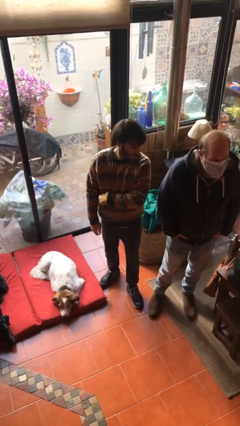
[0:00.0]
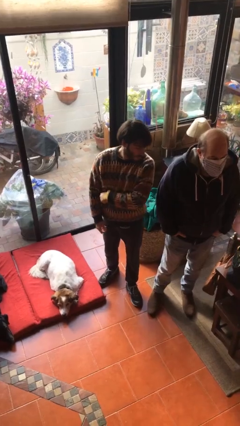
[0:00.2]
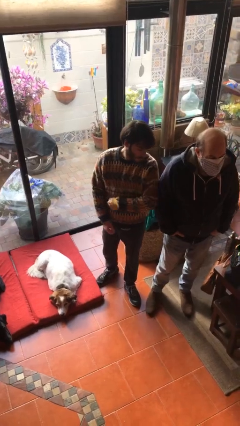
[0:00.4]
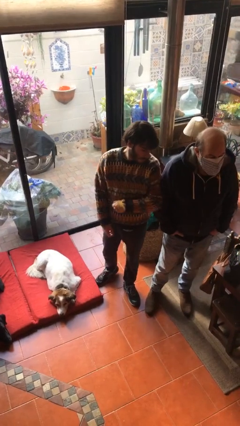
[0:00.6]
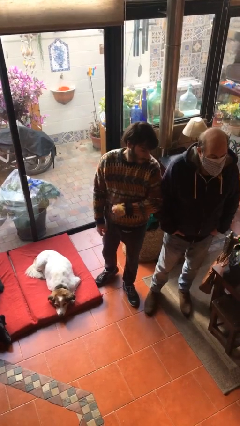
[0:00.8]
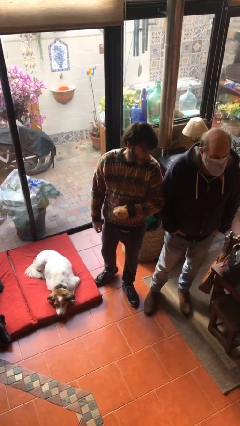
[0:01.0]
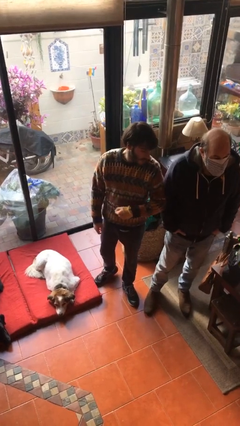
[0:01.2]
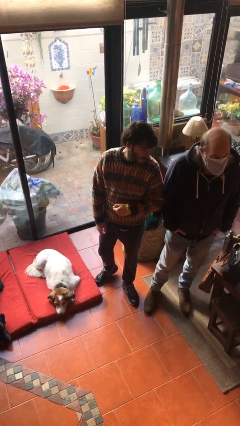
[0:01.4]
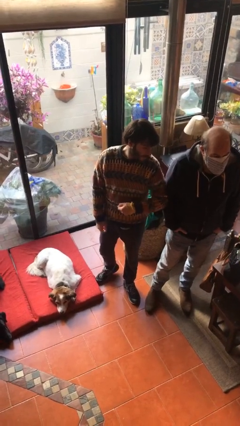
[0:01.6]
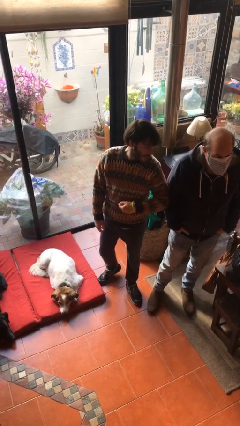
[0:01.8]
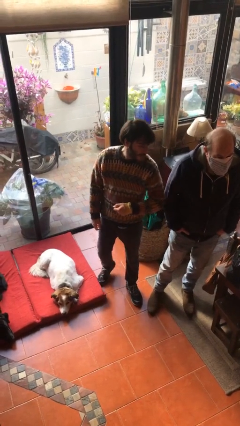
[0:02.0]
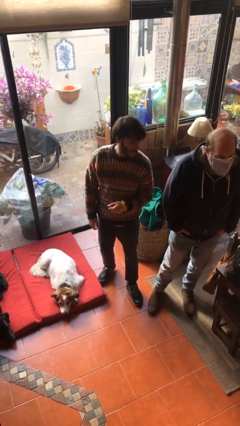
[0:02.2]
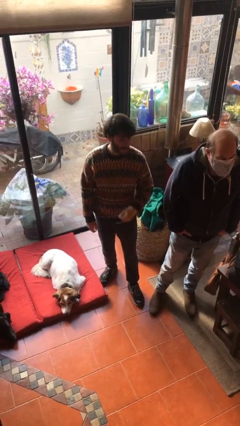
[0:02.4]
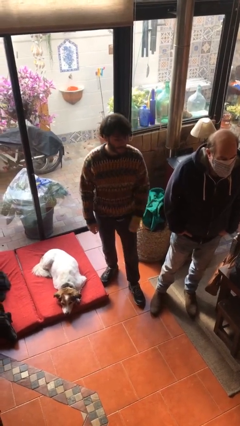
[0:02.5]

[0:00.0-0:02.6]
person nudges person with elbow

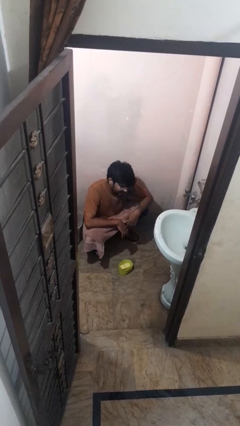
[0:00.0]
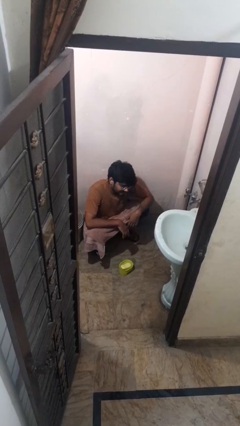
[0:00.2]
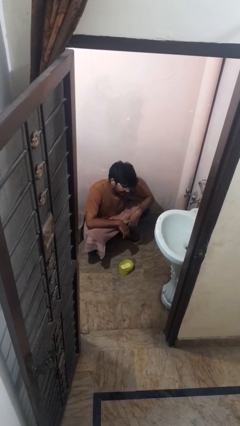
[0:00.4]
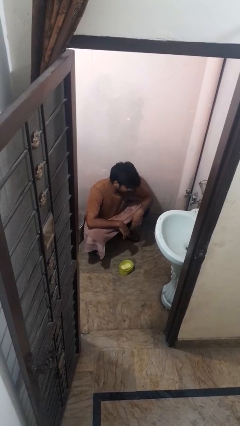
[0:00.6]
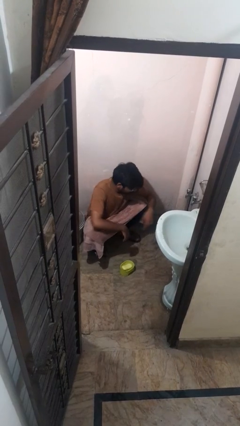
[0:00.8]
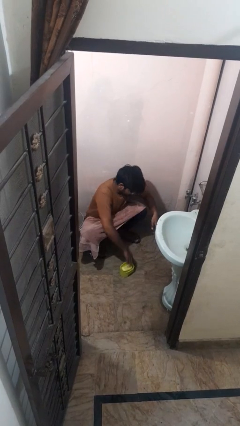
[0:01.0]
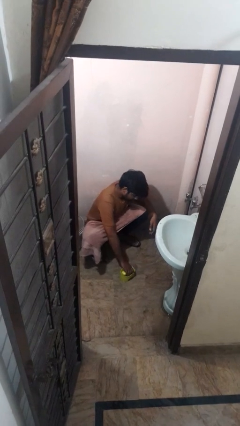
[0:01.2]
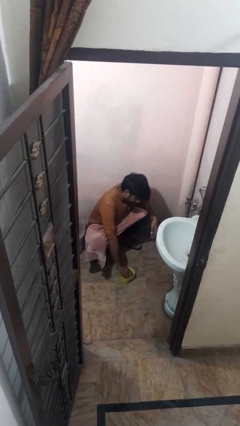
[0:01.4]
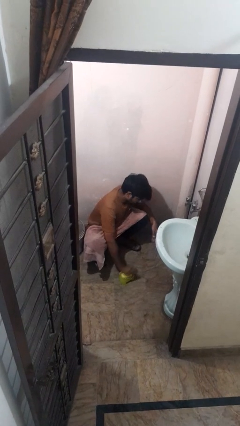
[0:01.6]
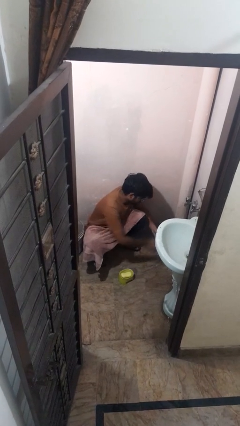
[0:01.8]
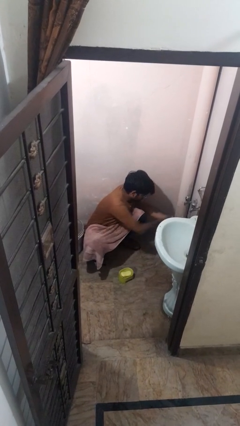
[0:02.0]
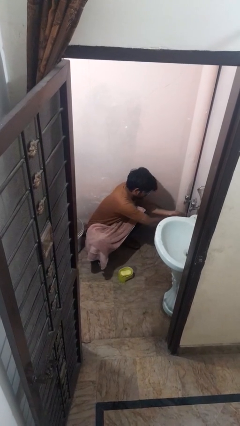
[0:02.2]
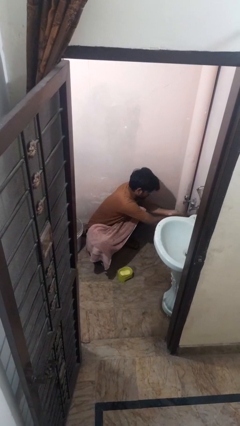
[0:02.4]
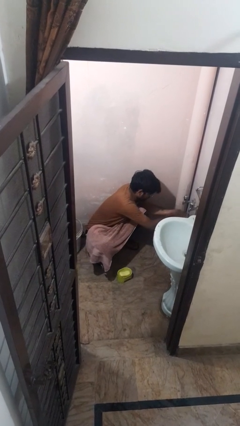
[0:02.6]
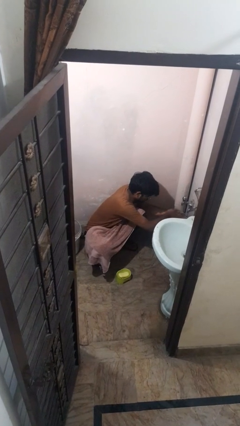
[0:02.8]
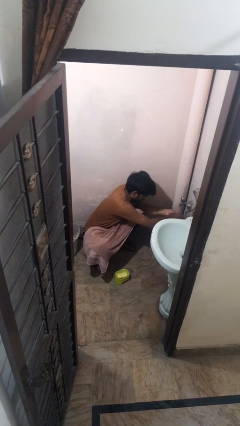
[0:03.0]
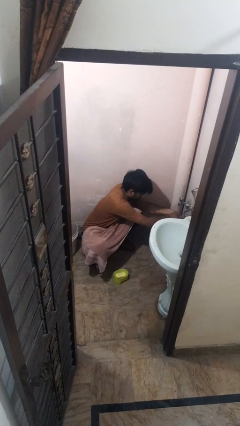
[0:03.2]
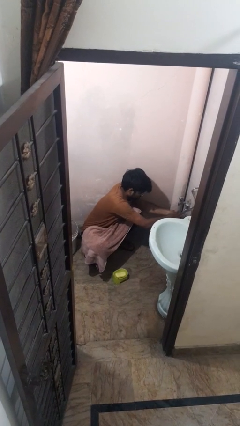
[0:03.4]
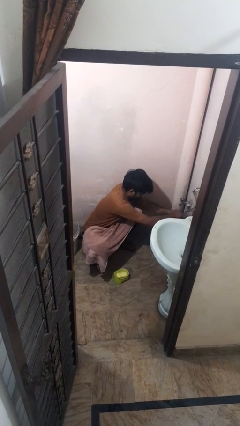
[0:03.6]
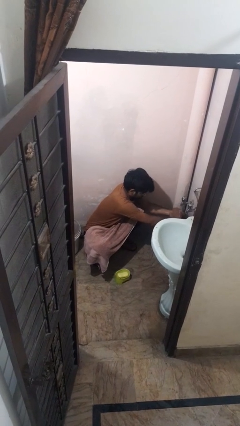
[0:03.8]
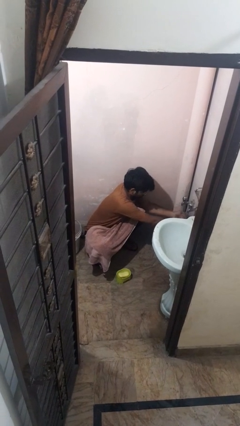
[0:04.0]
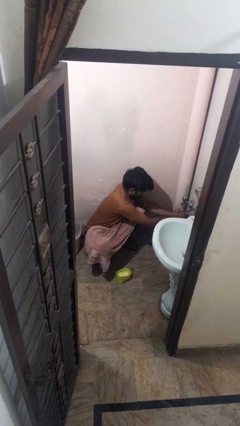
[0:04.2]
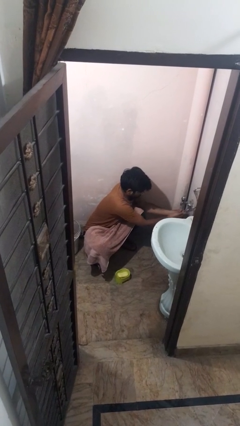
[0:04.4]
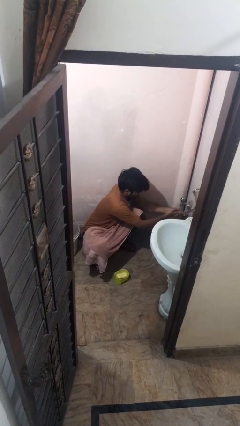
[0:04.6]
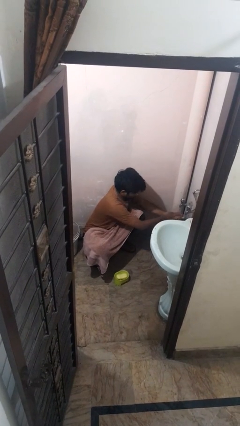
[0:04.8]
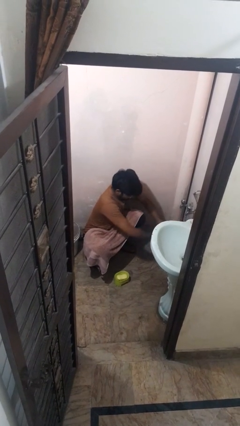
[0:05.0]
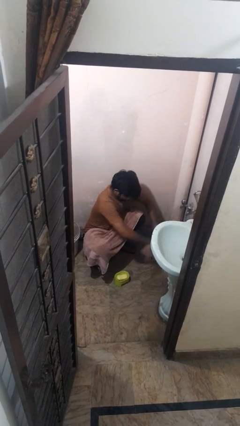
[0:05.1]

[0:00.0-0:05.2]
person washes hands

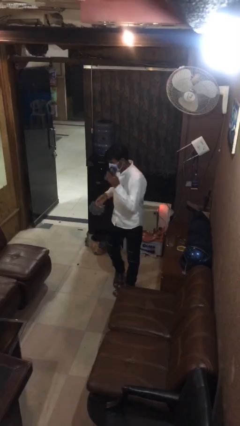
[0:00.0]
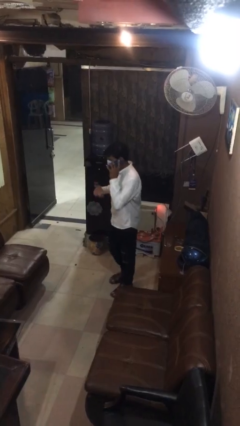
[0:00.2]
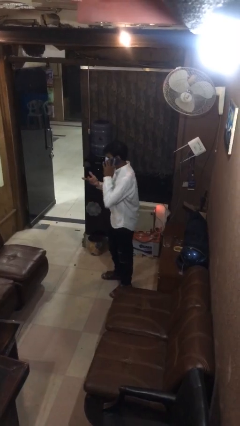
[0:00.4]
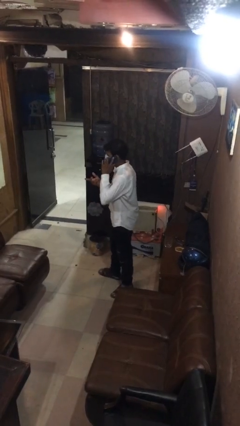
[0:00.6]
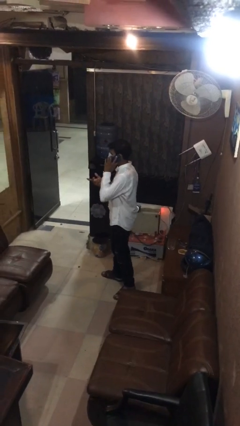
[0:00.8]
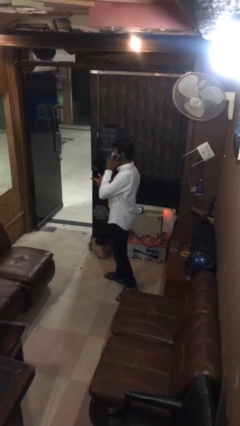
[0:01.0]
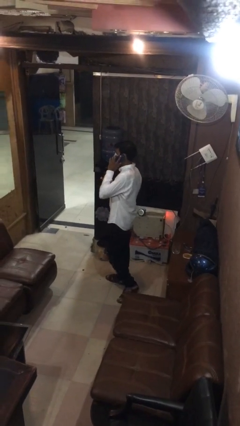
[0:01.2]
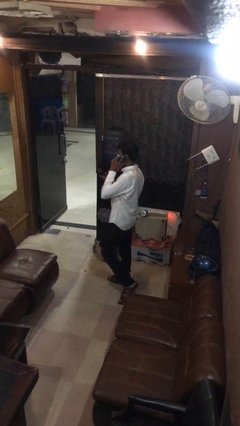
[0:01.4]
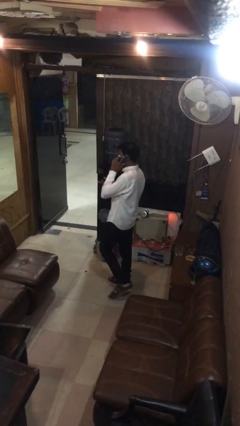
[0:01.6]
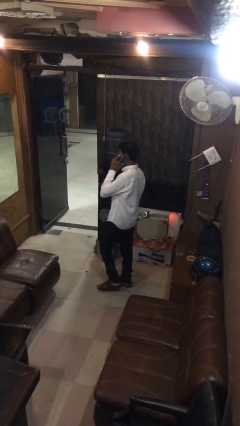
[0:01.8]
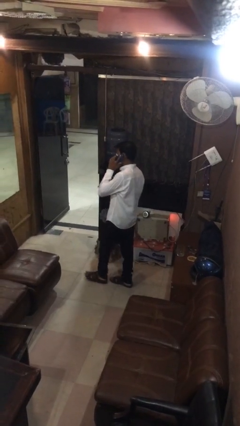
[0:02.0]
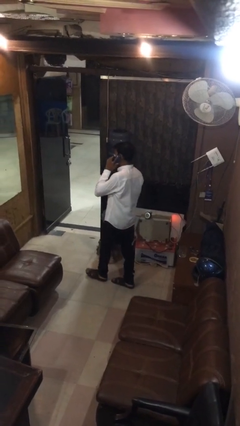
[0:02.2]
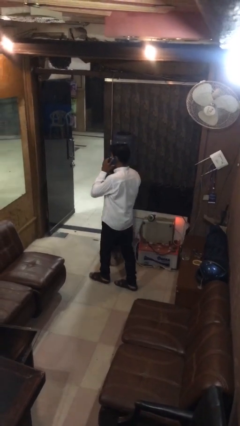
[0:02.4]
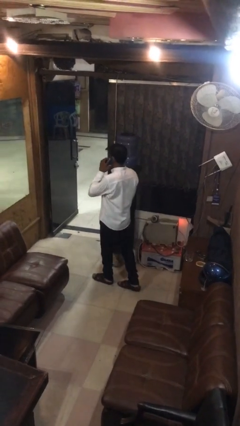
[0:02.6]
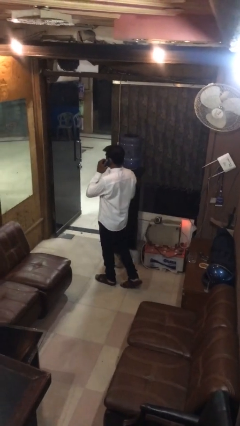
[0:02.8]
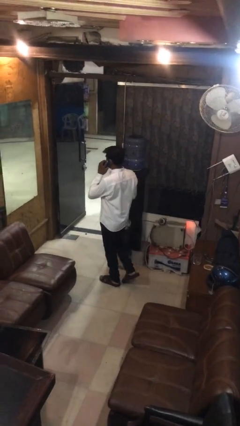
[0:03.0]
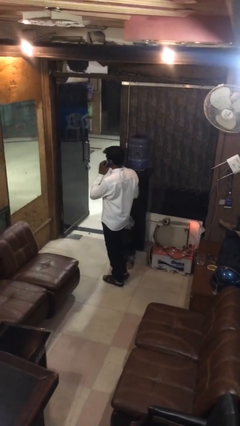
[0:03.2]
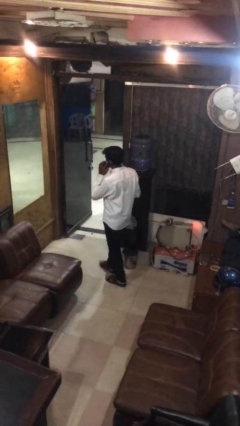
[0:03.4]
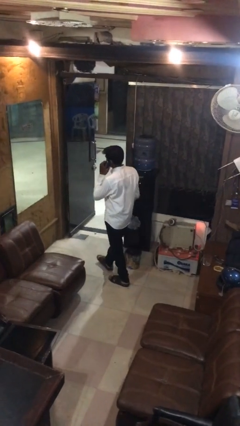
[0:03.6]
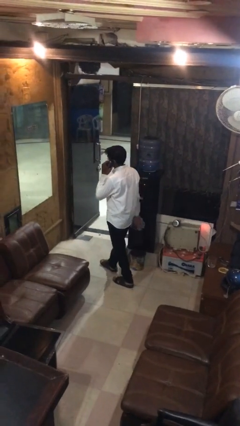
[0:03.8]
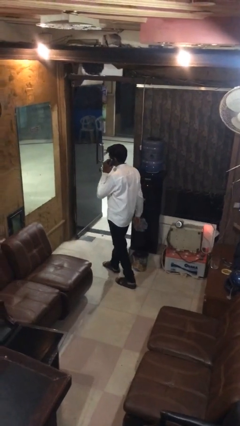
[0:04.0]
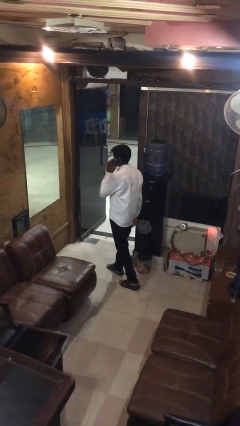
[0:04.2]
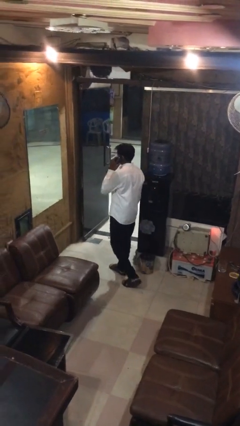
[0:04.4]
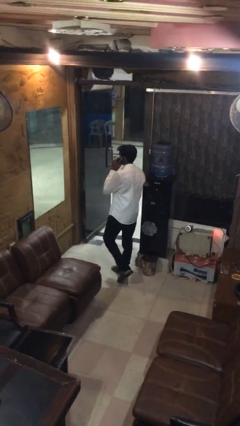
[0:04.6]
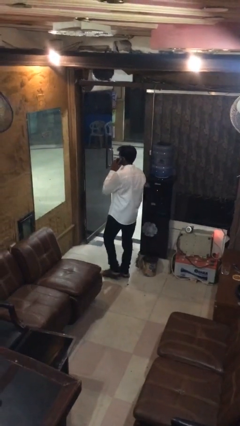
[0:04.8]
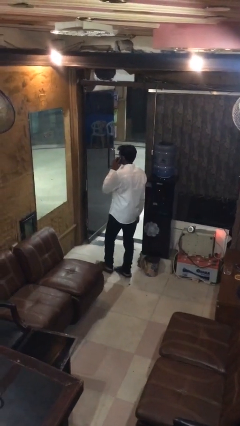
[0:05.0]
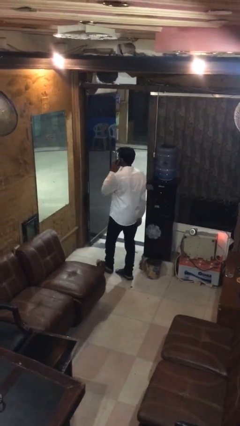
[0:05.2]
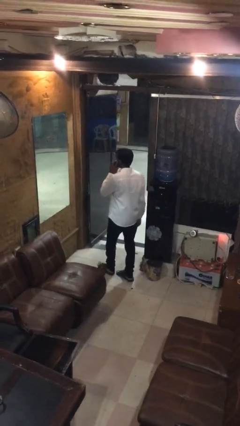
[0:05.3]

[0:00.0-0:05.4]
person talks on phone

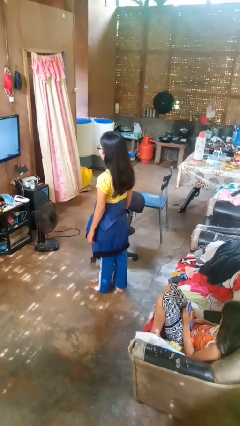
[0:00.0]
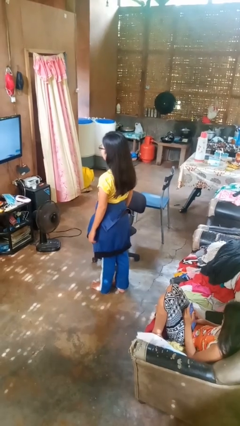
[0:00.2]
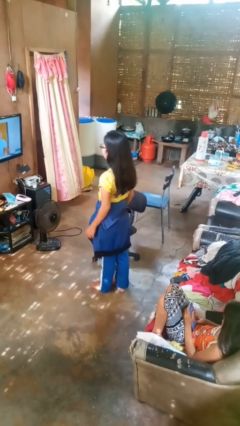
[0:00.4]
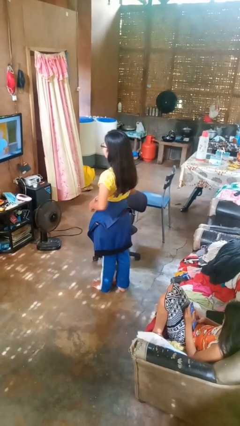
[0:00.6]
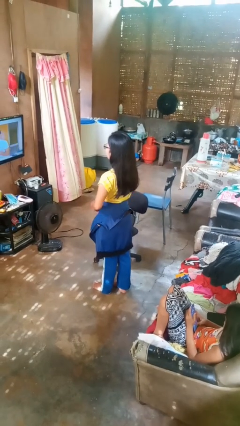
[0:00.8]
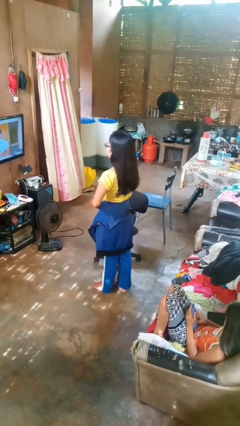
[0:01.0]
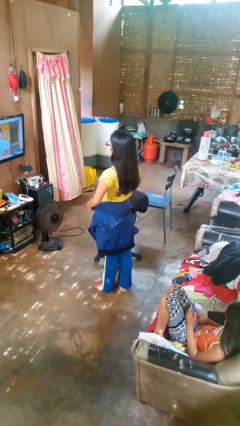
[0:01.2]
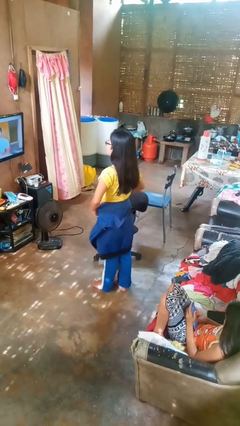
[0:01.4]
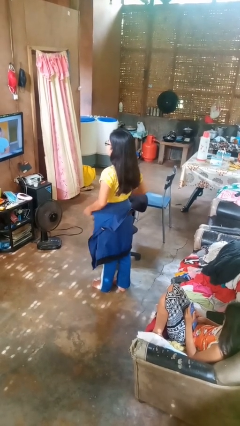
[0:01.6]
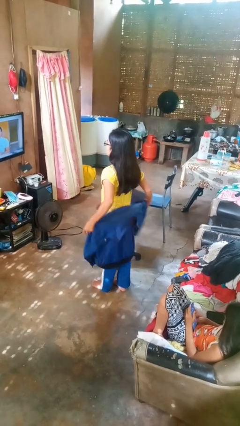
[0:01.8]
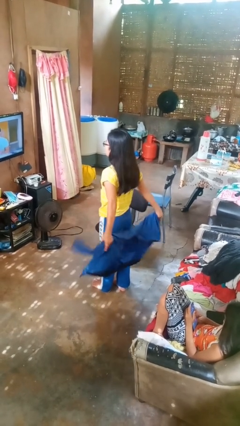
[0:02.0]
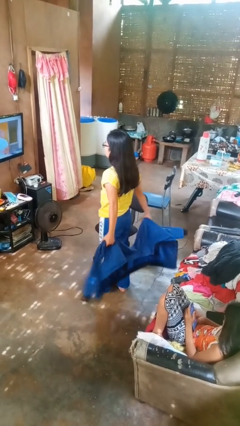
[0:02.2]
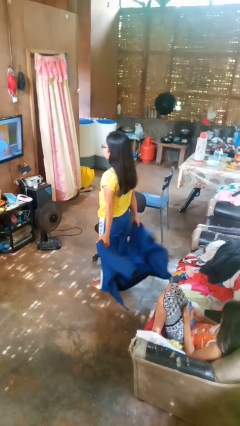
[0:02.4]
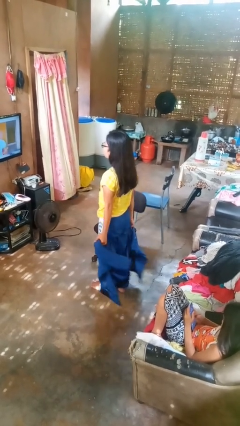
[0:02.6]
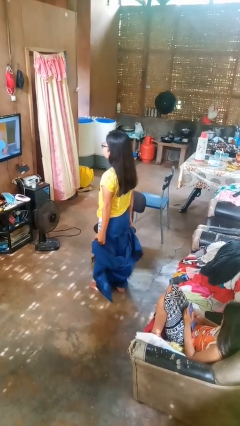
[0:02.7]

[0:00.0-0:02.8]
person unties jacket around waist

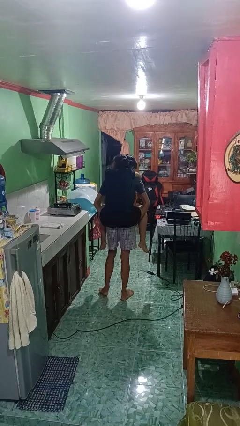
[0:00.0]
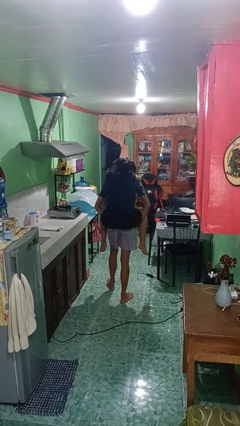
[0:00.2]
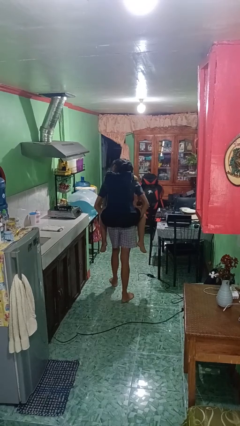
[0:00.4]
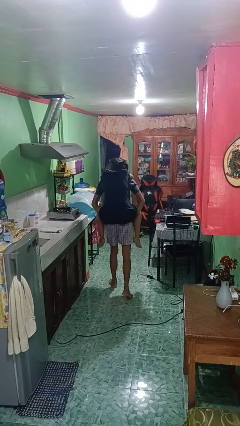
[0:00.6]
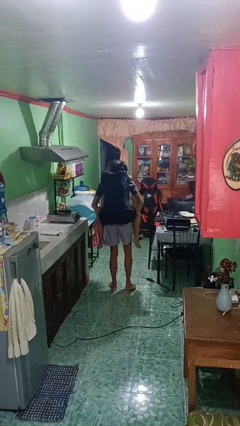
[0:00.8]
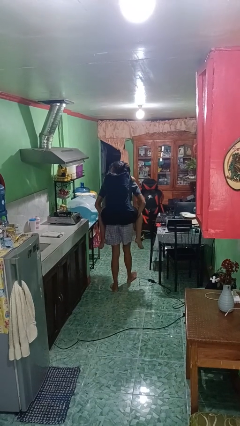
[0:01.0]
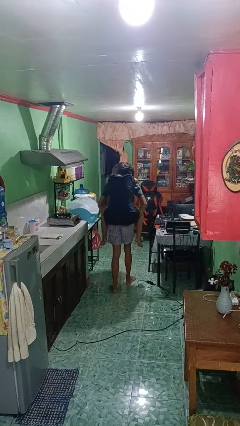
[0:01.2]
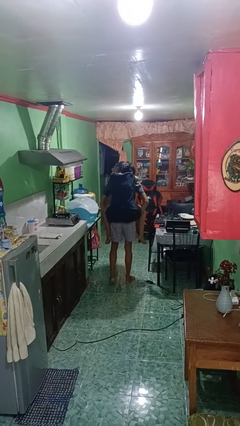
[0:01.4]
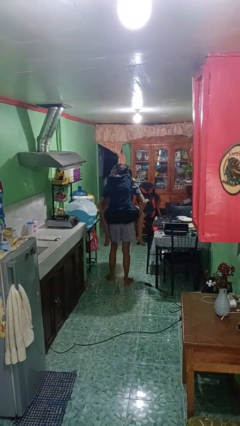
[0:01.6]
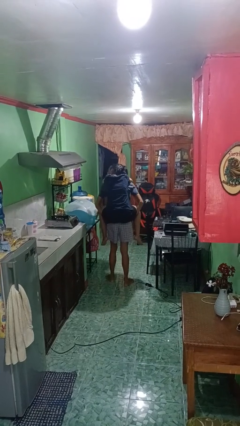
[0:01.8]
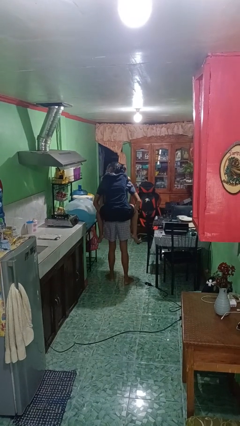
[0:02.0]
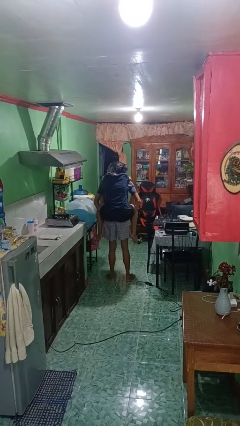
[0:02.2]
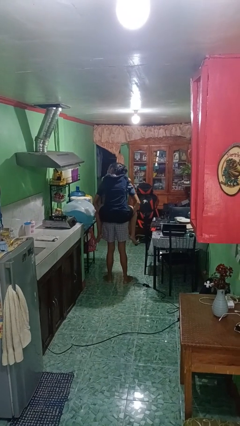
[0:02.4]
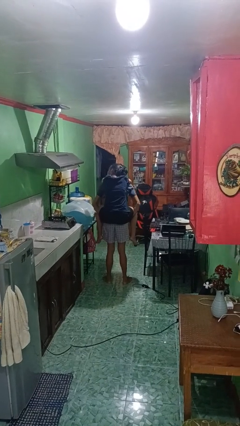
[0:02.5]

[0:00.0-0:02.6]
person carries person on back
